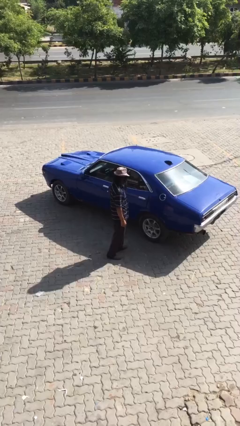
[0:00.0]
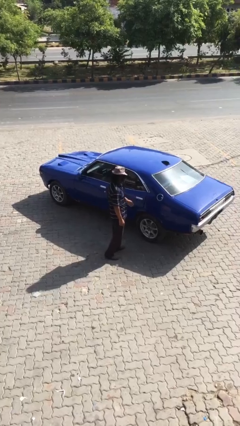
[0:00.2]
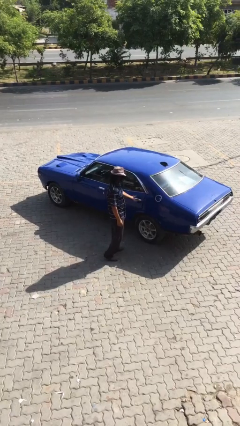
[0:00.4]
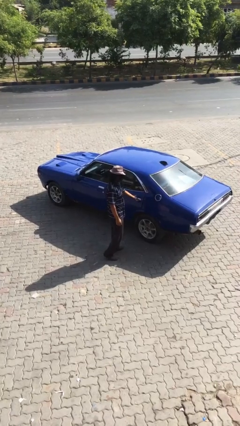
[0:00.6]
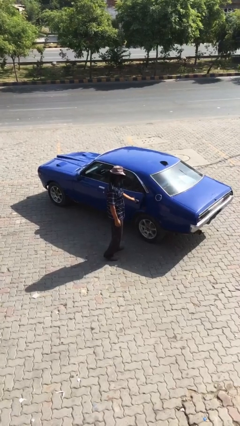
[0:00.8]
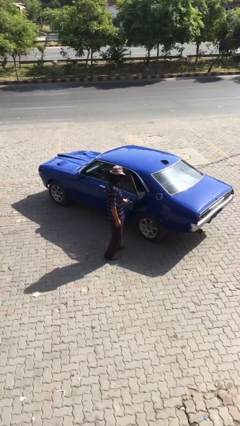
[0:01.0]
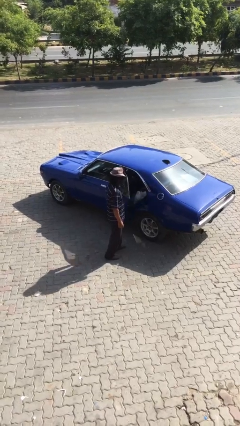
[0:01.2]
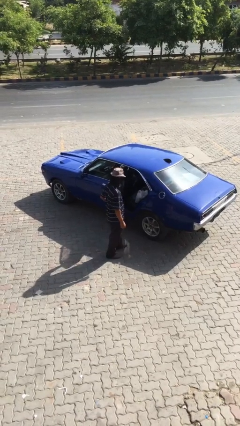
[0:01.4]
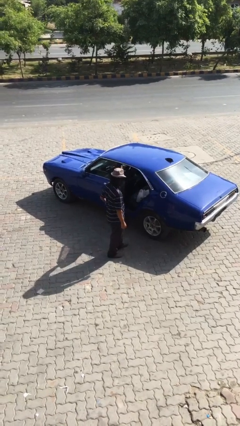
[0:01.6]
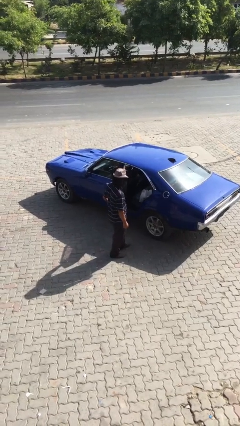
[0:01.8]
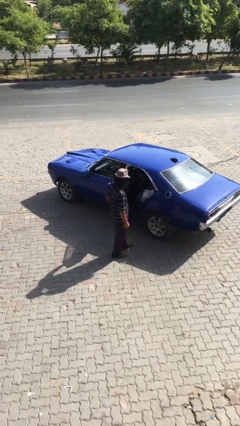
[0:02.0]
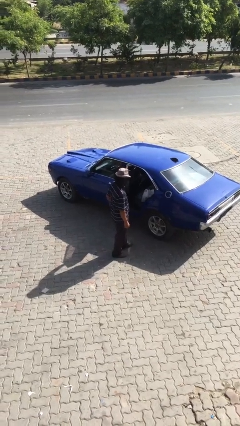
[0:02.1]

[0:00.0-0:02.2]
person opens car door

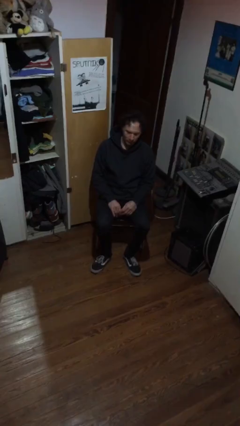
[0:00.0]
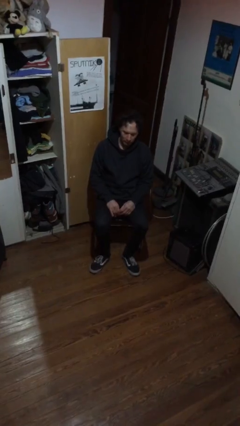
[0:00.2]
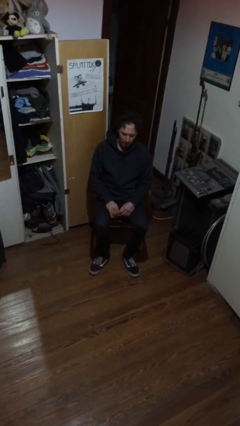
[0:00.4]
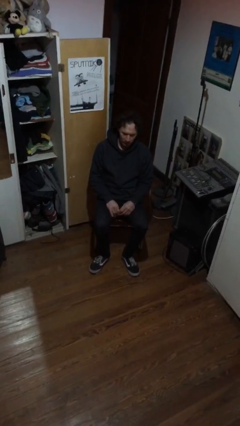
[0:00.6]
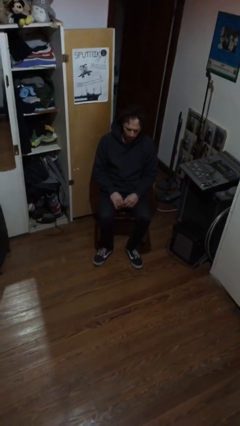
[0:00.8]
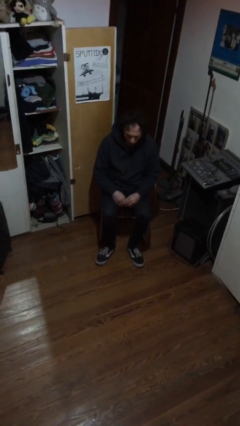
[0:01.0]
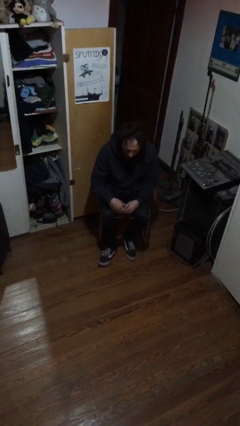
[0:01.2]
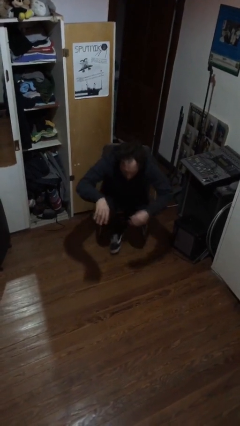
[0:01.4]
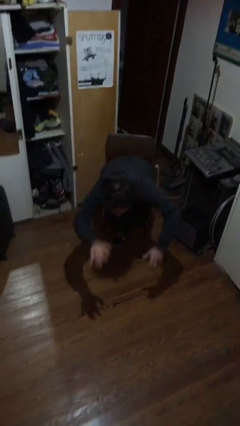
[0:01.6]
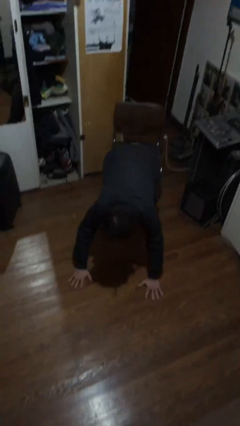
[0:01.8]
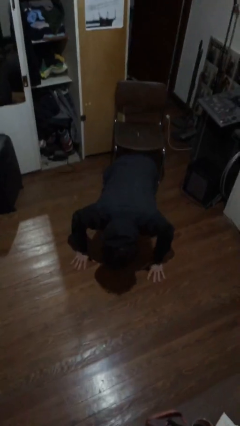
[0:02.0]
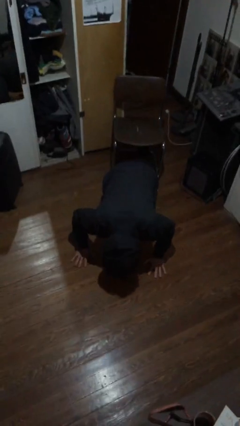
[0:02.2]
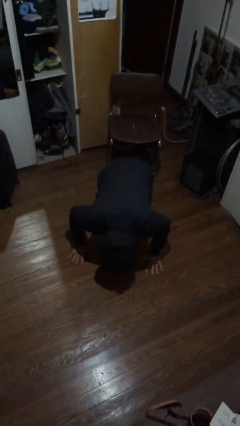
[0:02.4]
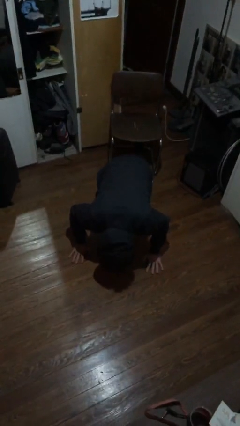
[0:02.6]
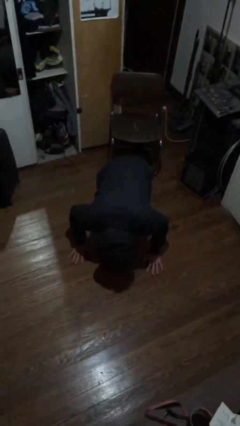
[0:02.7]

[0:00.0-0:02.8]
person falls from chair

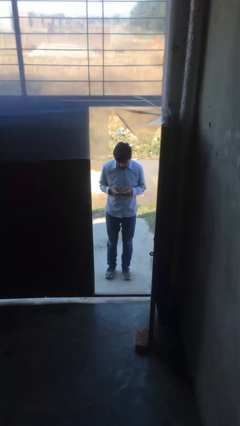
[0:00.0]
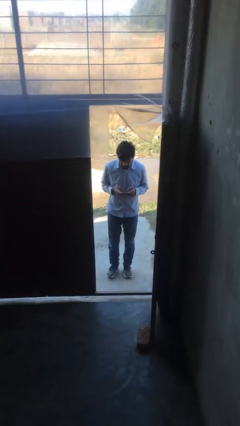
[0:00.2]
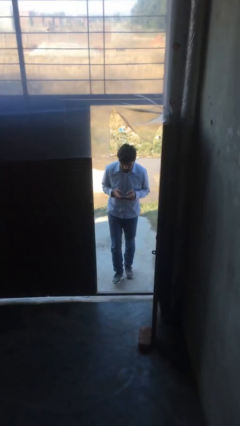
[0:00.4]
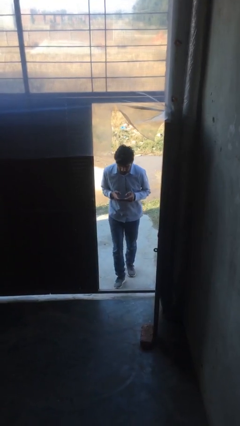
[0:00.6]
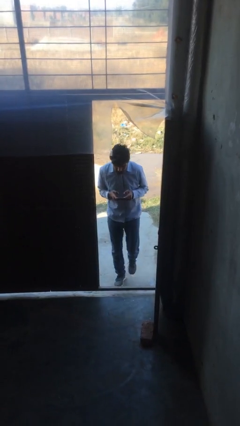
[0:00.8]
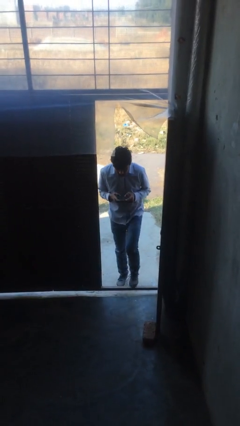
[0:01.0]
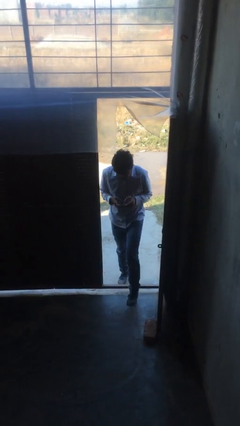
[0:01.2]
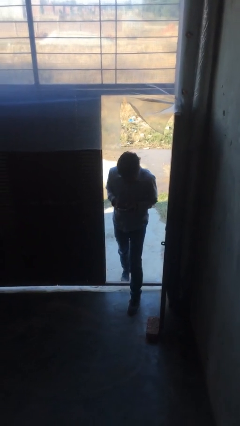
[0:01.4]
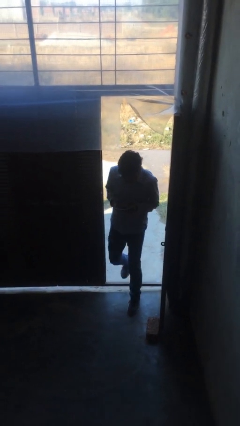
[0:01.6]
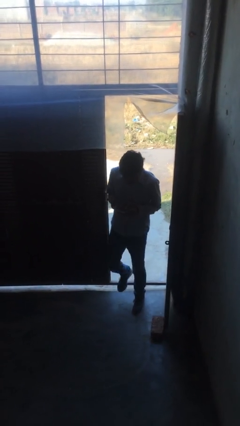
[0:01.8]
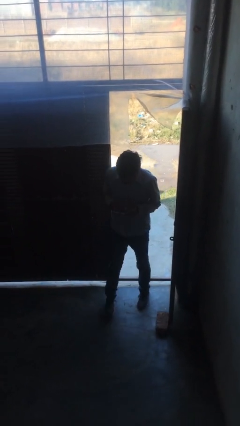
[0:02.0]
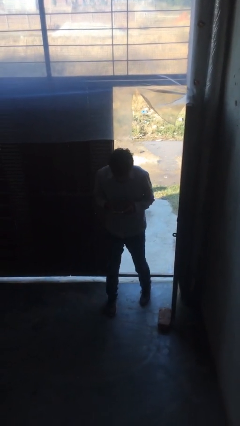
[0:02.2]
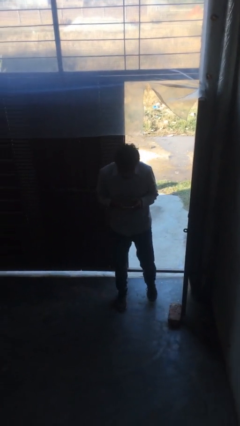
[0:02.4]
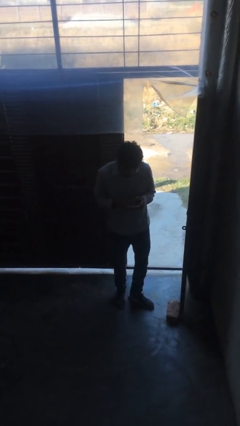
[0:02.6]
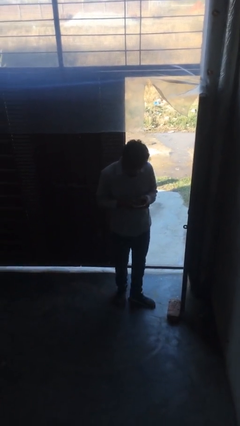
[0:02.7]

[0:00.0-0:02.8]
person enters scene through structure

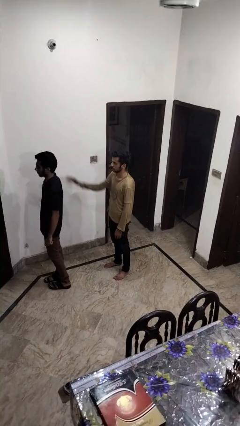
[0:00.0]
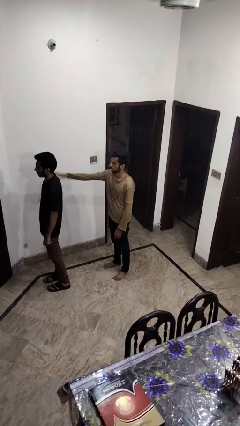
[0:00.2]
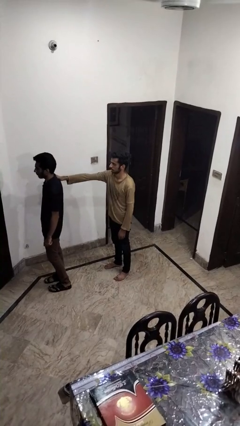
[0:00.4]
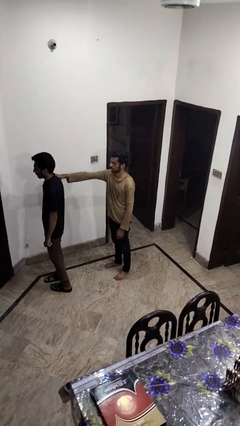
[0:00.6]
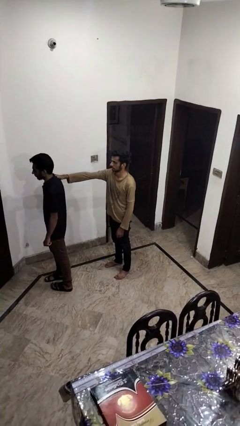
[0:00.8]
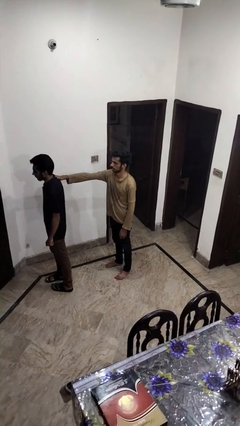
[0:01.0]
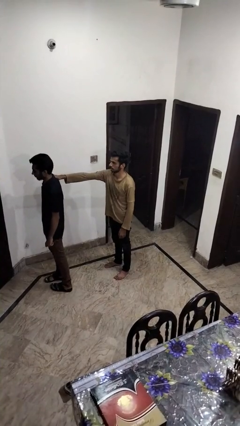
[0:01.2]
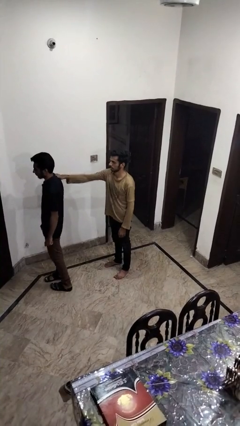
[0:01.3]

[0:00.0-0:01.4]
person grabs person by shoulder

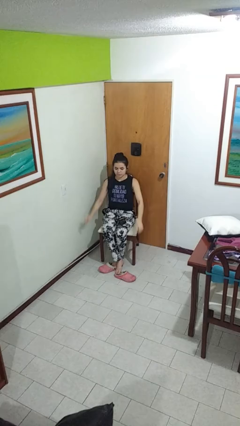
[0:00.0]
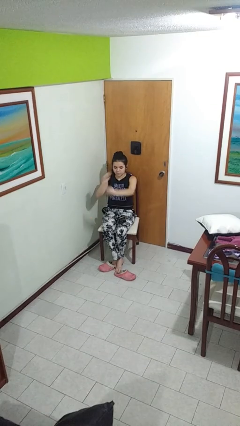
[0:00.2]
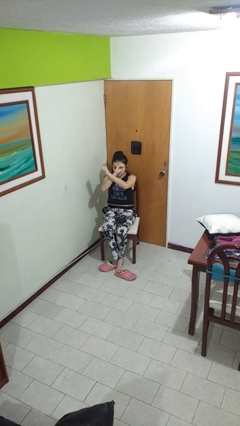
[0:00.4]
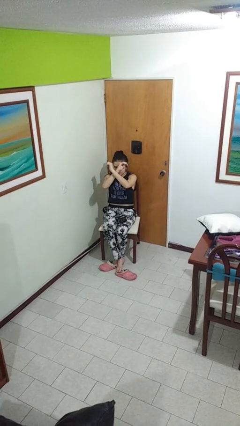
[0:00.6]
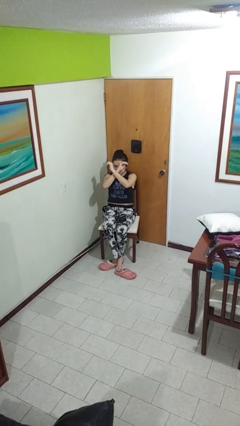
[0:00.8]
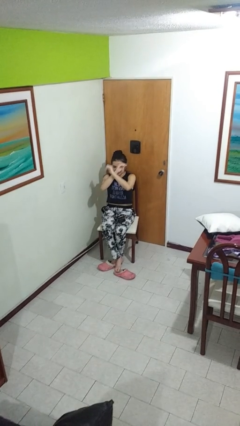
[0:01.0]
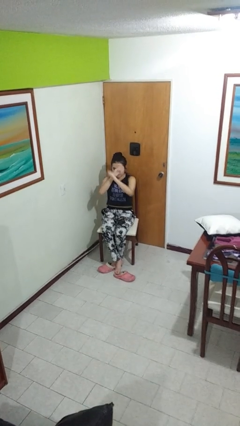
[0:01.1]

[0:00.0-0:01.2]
person gestures arms x

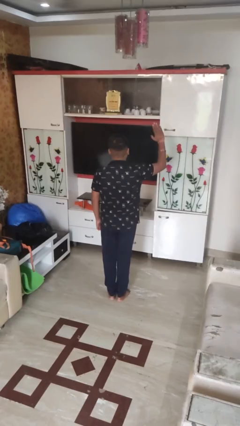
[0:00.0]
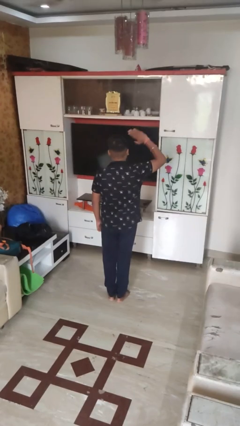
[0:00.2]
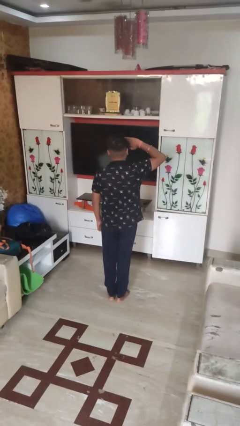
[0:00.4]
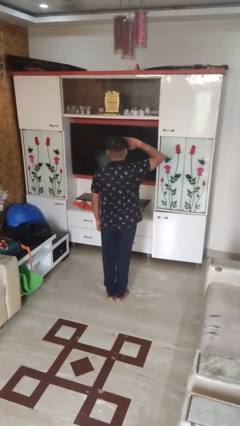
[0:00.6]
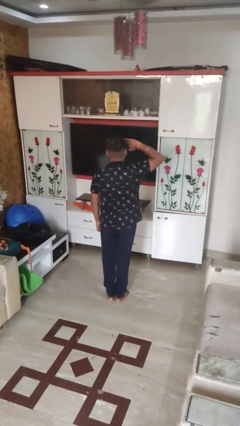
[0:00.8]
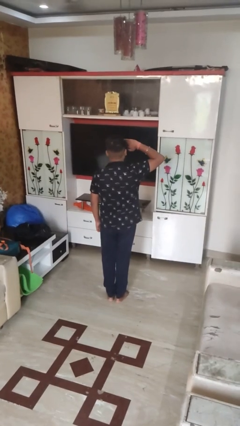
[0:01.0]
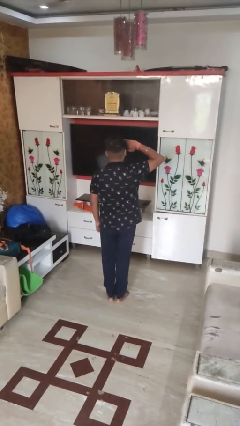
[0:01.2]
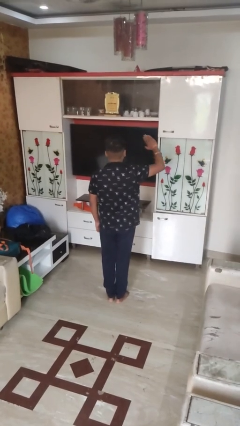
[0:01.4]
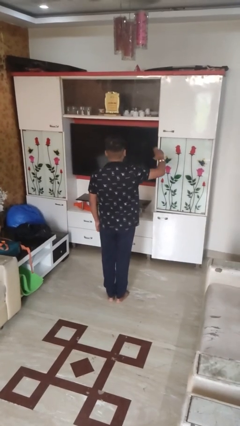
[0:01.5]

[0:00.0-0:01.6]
person salutes

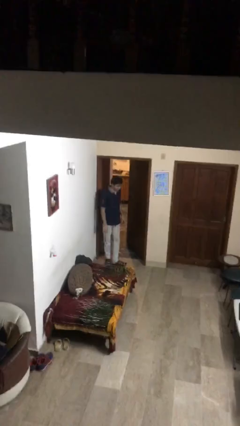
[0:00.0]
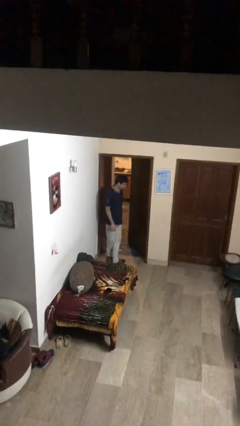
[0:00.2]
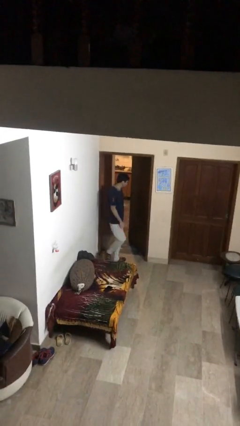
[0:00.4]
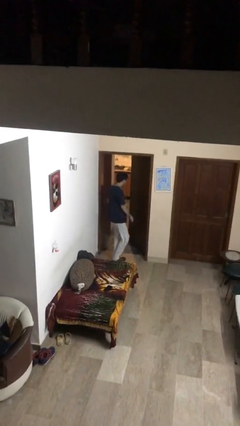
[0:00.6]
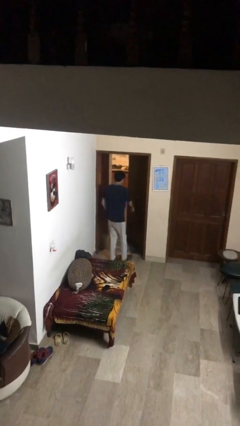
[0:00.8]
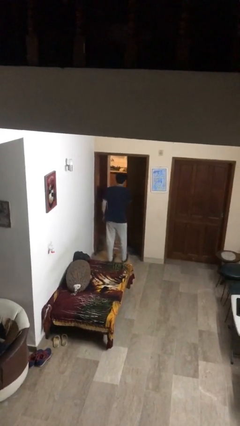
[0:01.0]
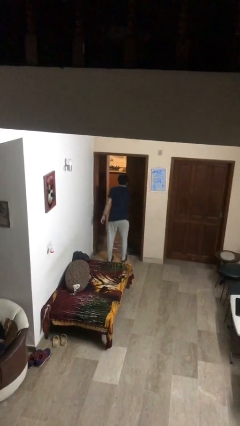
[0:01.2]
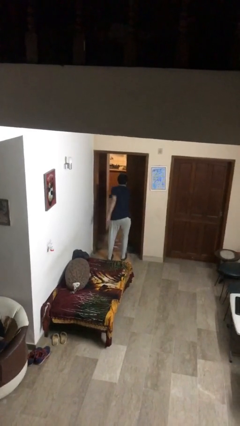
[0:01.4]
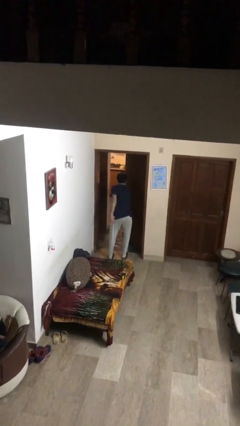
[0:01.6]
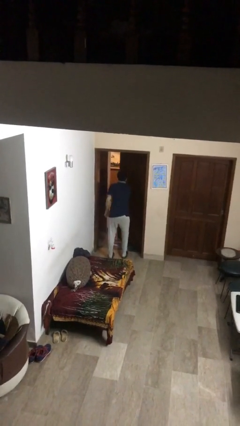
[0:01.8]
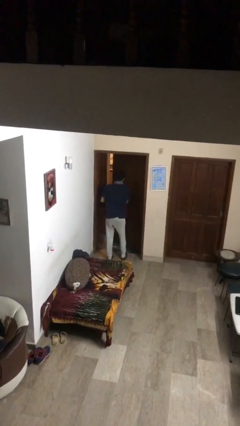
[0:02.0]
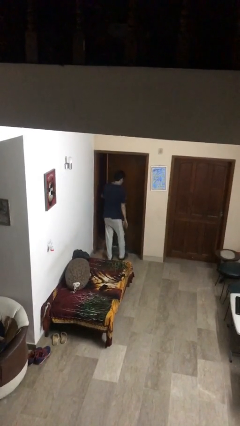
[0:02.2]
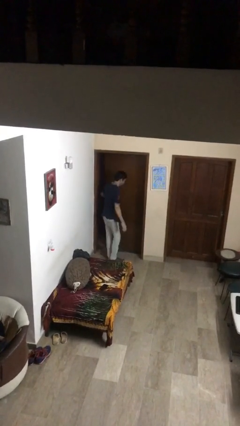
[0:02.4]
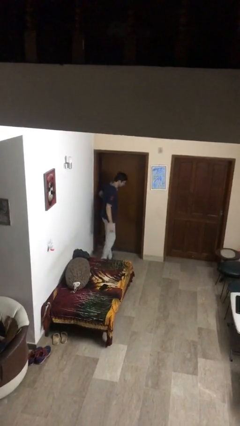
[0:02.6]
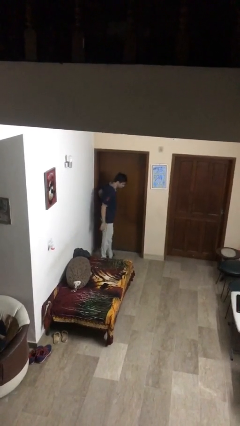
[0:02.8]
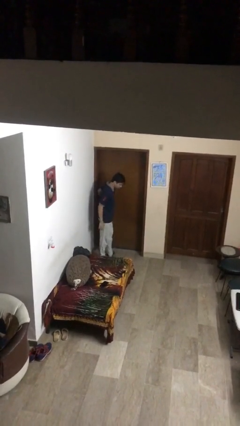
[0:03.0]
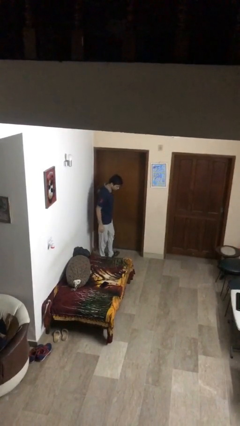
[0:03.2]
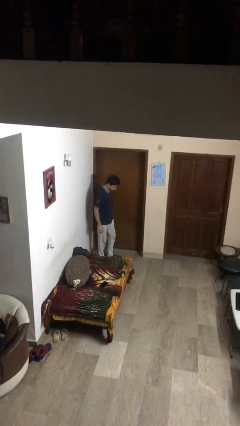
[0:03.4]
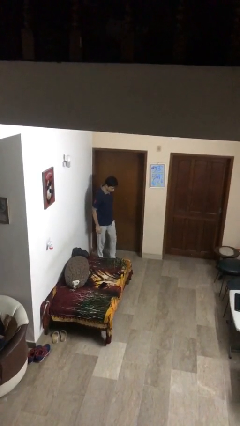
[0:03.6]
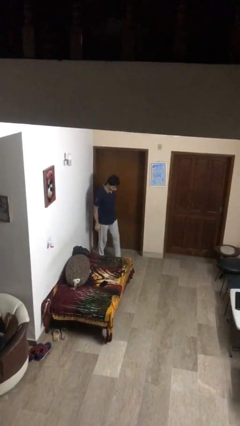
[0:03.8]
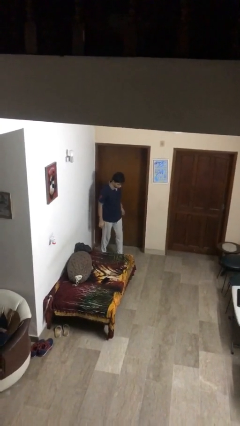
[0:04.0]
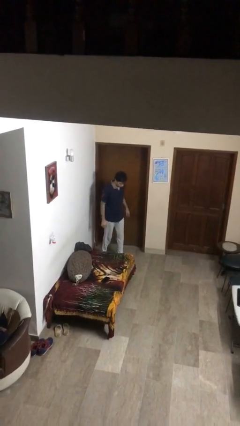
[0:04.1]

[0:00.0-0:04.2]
person closes facility door

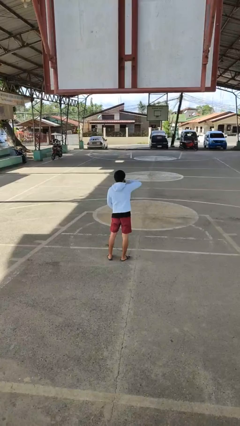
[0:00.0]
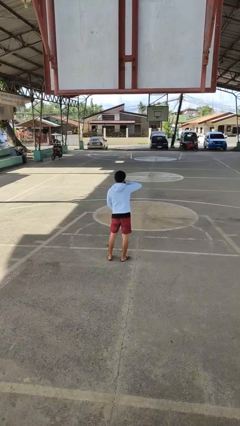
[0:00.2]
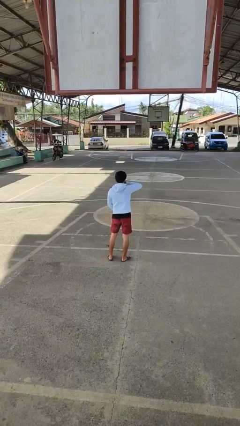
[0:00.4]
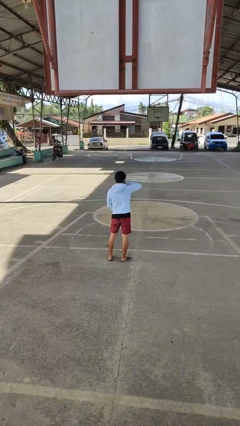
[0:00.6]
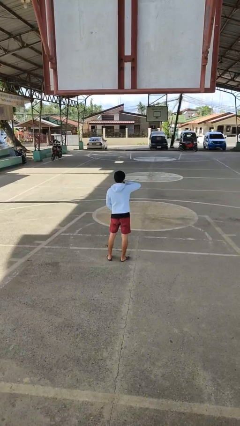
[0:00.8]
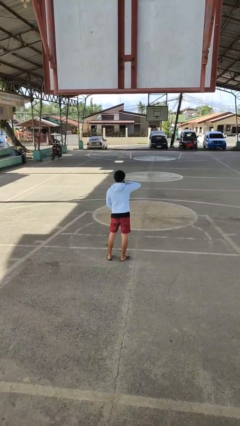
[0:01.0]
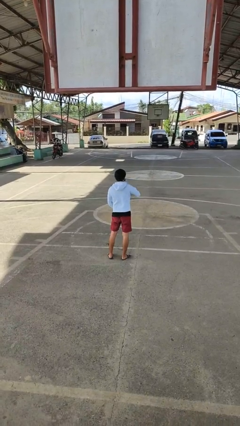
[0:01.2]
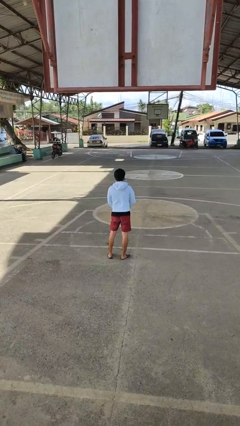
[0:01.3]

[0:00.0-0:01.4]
person zips up jacket
